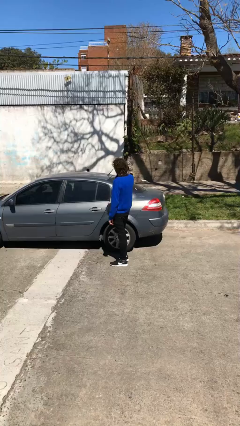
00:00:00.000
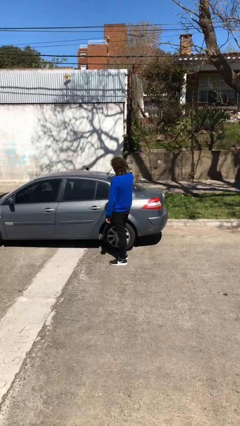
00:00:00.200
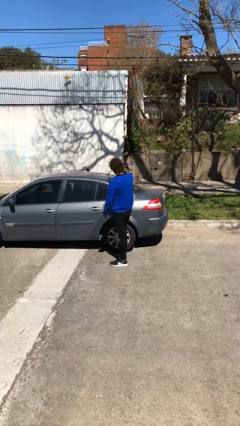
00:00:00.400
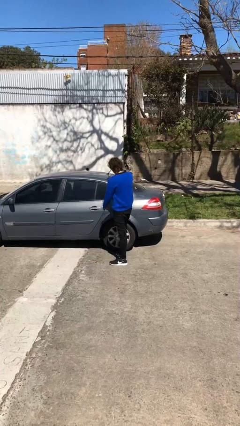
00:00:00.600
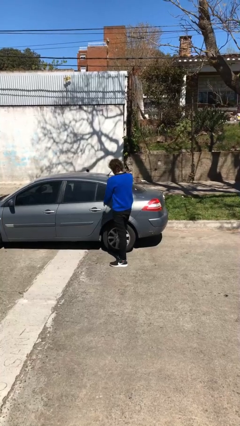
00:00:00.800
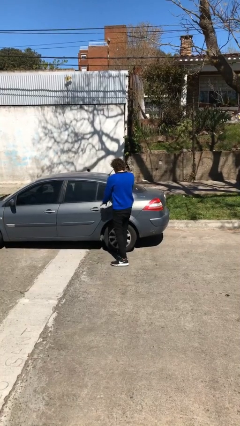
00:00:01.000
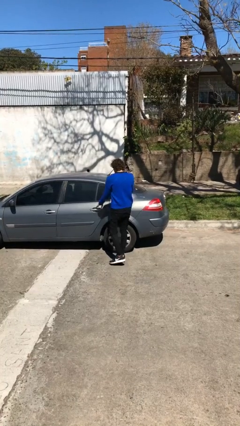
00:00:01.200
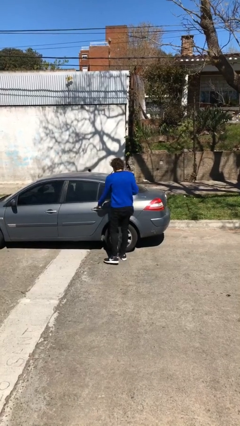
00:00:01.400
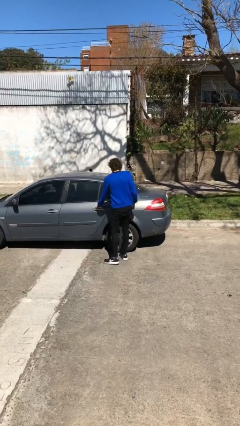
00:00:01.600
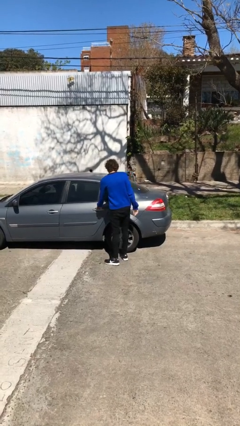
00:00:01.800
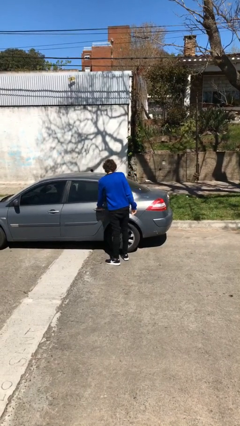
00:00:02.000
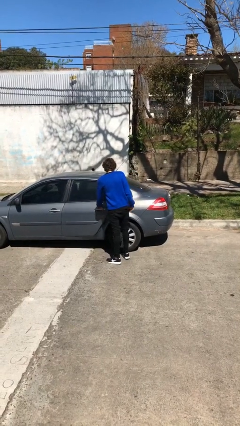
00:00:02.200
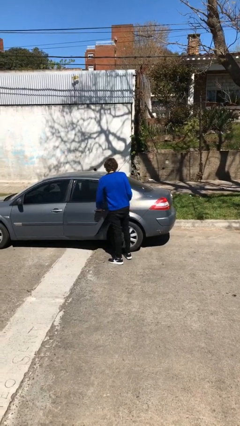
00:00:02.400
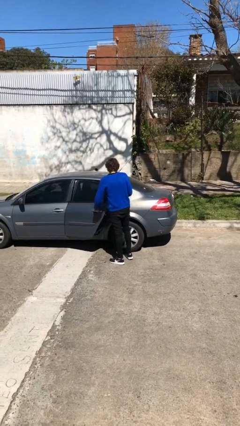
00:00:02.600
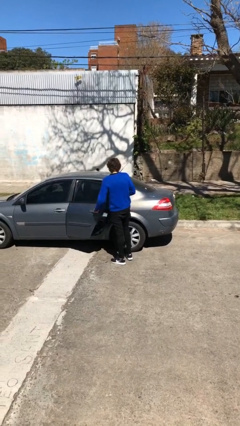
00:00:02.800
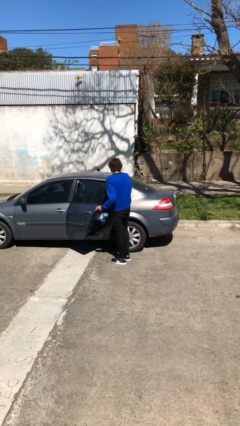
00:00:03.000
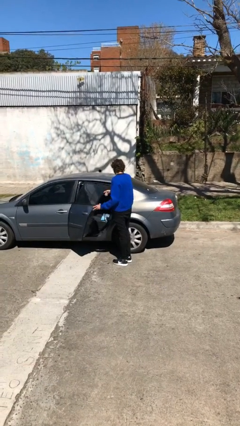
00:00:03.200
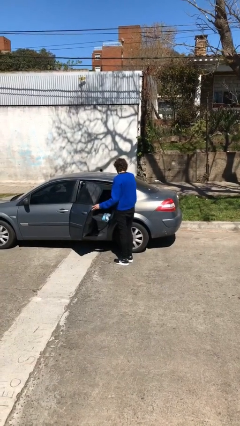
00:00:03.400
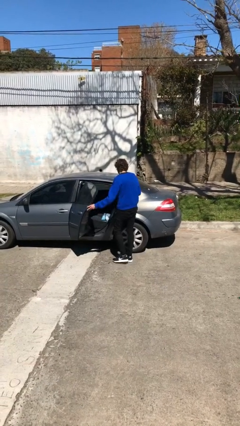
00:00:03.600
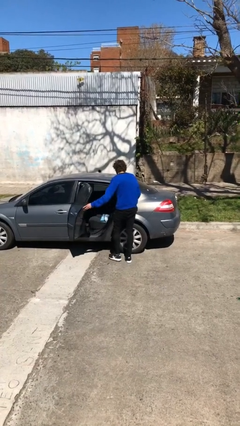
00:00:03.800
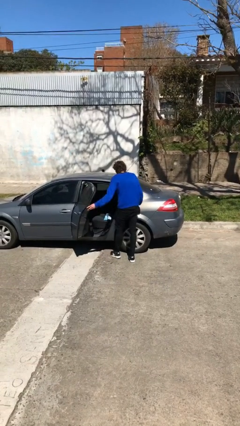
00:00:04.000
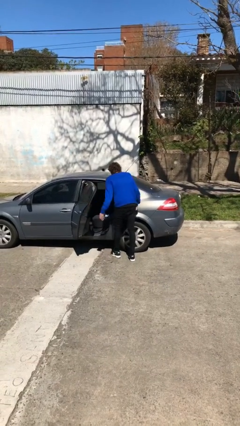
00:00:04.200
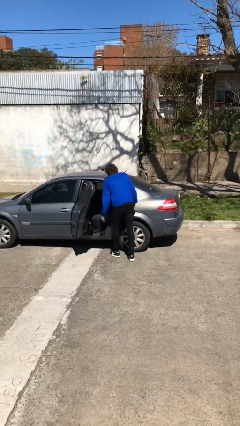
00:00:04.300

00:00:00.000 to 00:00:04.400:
person opens car door

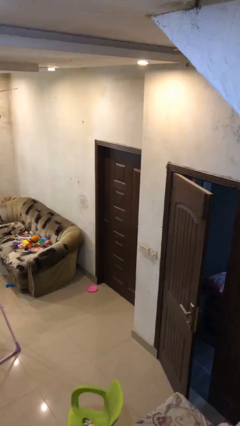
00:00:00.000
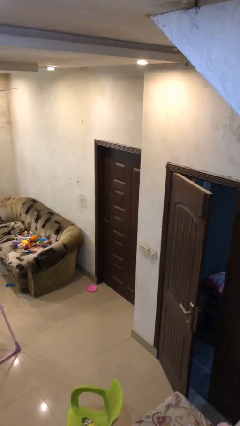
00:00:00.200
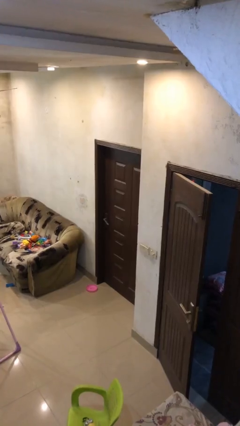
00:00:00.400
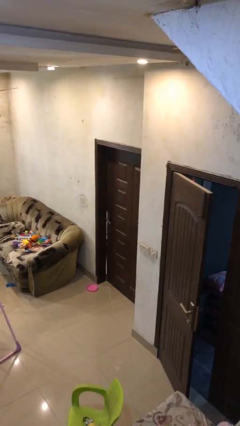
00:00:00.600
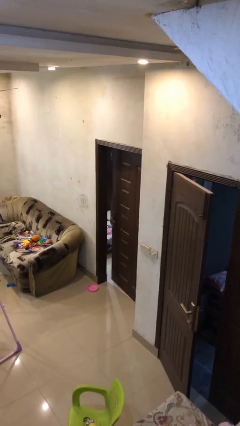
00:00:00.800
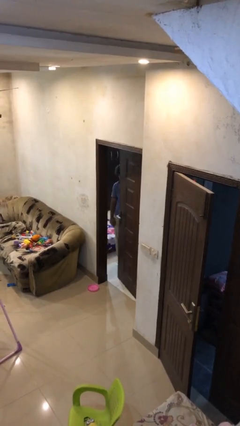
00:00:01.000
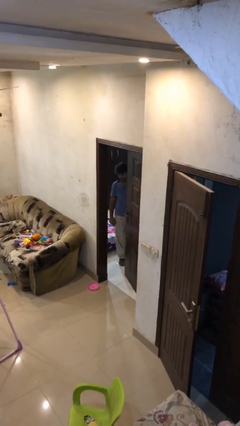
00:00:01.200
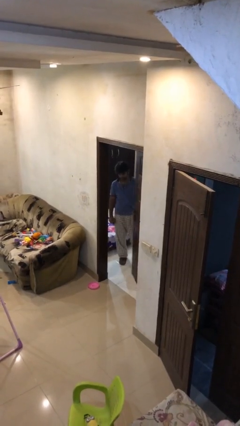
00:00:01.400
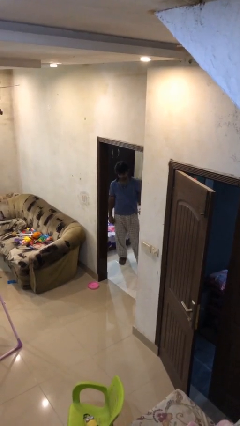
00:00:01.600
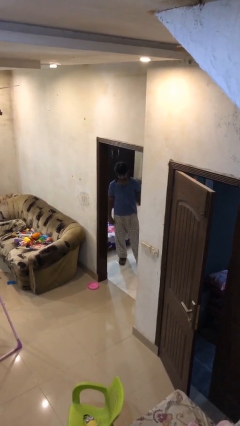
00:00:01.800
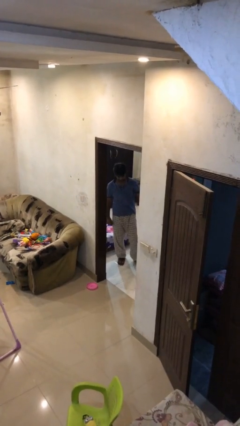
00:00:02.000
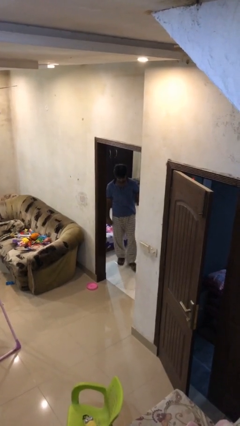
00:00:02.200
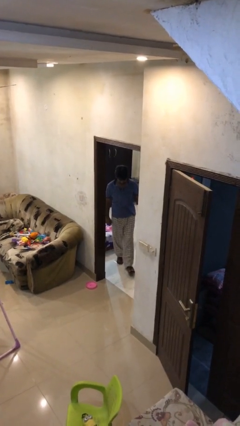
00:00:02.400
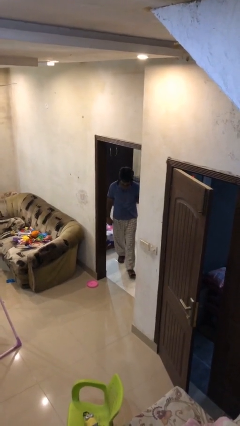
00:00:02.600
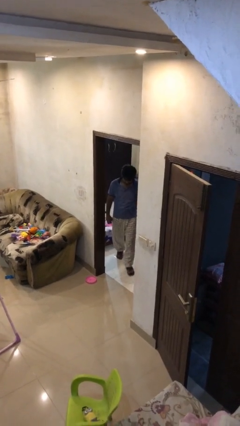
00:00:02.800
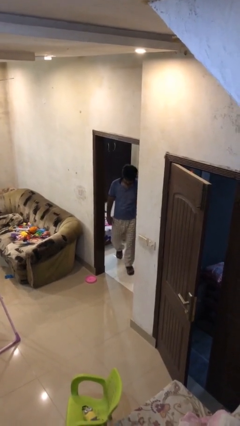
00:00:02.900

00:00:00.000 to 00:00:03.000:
person opens facility door

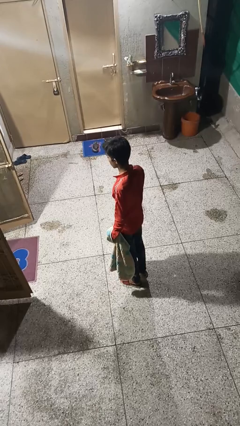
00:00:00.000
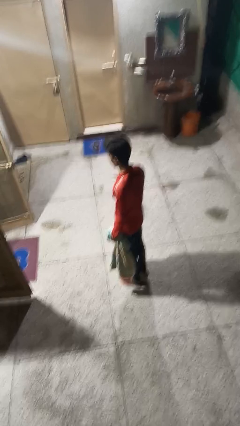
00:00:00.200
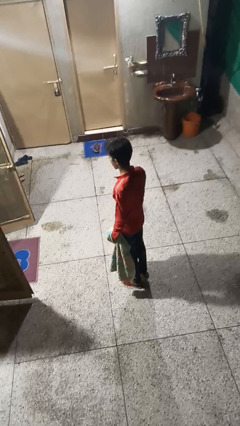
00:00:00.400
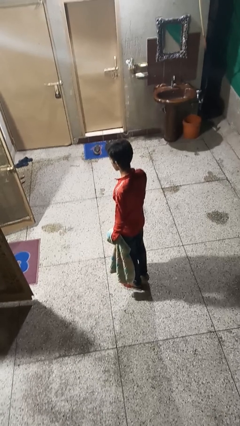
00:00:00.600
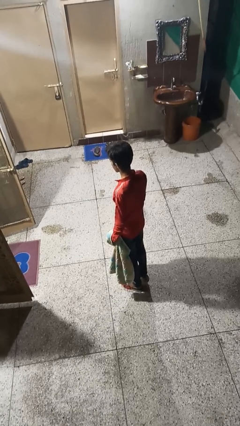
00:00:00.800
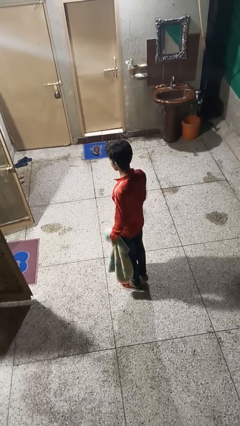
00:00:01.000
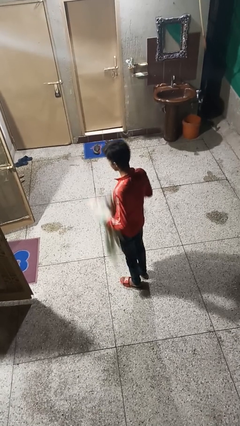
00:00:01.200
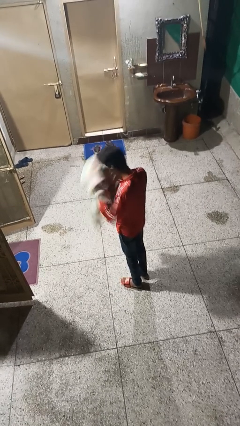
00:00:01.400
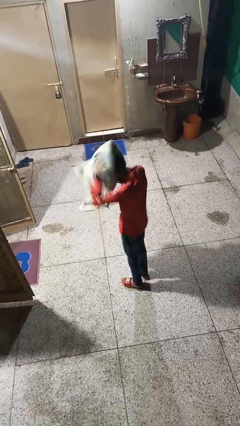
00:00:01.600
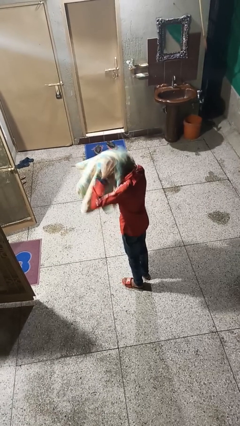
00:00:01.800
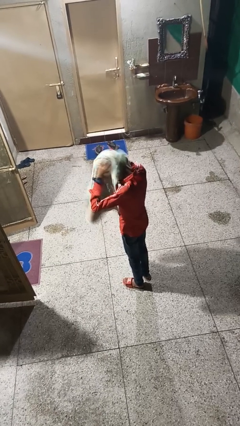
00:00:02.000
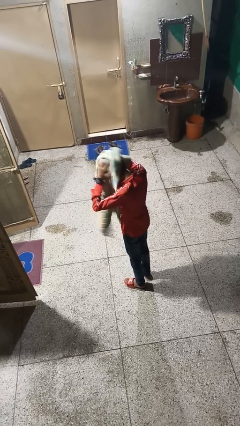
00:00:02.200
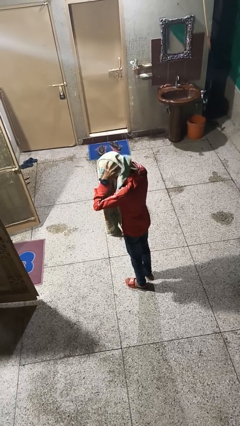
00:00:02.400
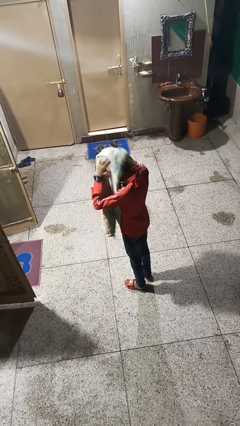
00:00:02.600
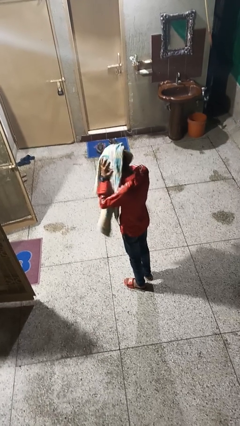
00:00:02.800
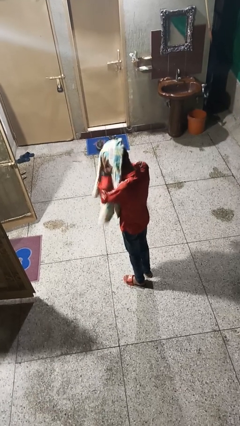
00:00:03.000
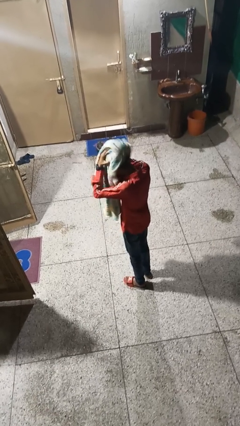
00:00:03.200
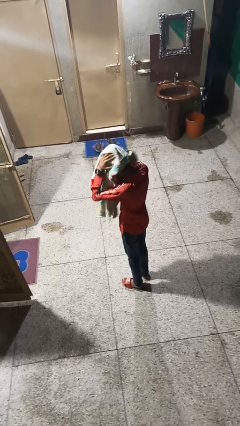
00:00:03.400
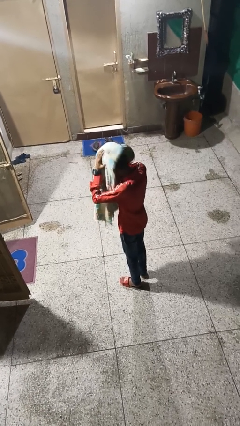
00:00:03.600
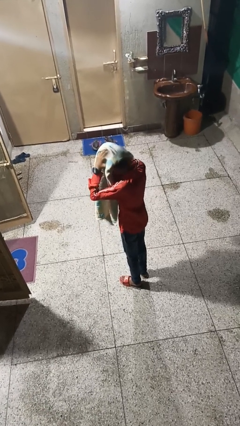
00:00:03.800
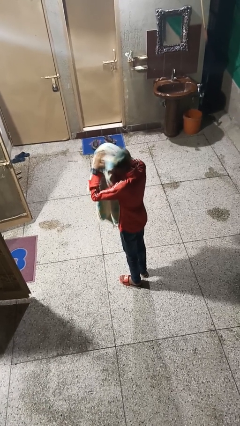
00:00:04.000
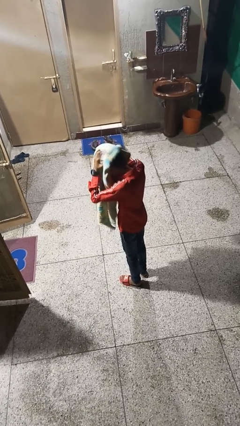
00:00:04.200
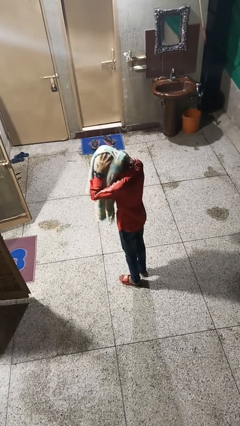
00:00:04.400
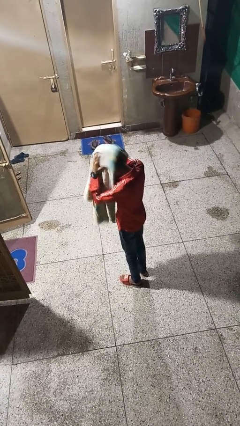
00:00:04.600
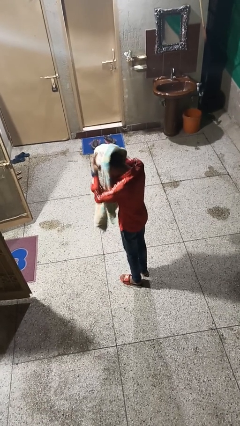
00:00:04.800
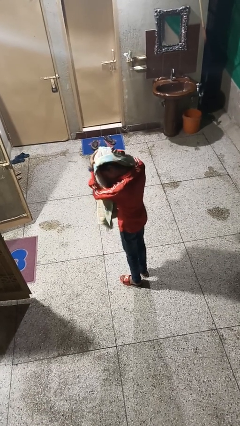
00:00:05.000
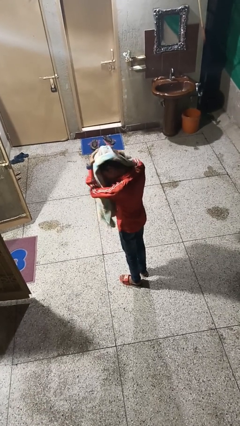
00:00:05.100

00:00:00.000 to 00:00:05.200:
person dries hair with towel

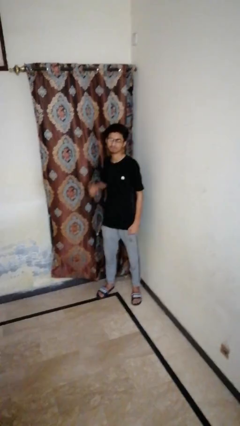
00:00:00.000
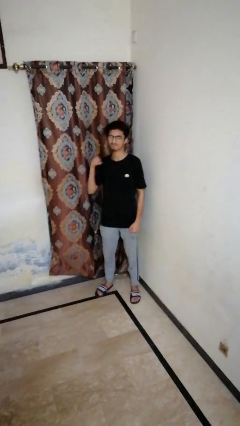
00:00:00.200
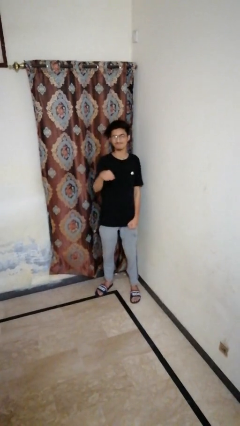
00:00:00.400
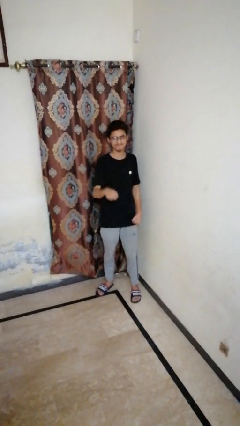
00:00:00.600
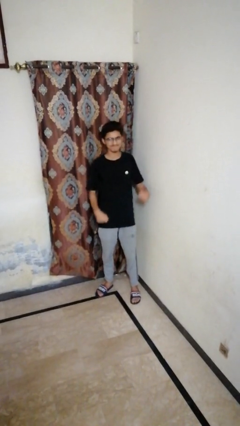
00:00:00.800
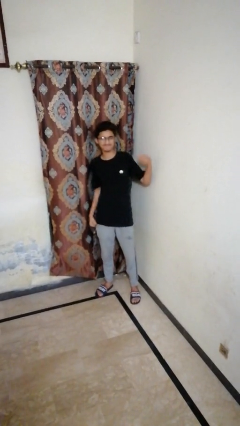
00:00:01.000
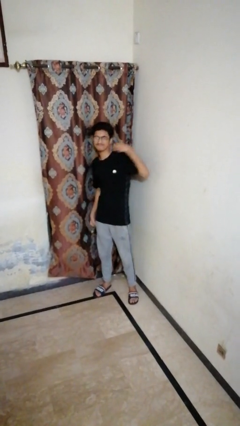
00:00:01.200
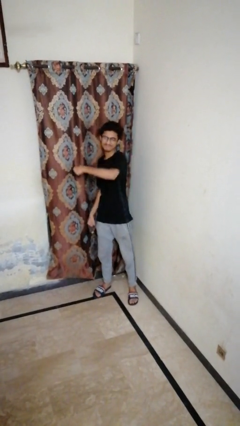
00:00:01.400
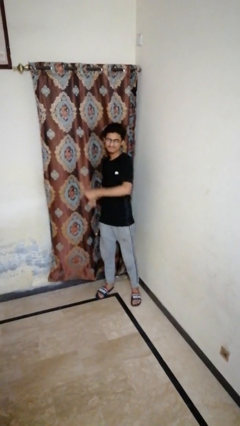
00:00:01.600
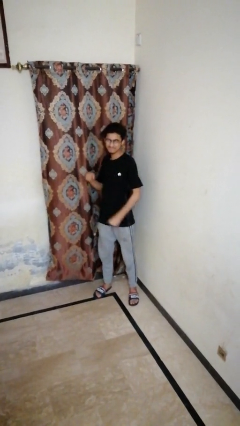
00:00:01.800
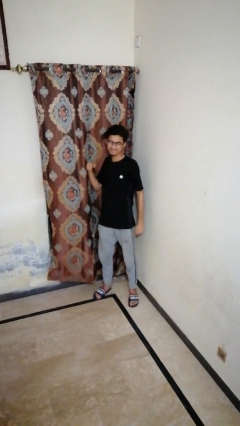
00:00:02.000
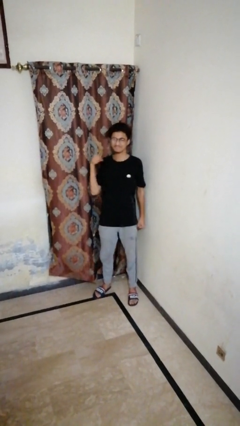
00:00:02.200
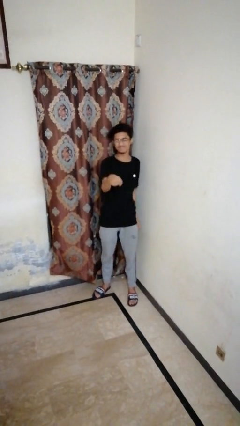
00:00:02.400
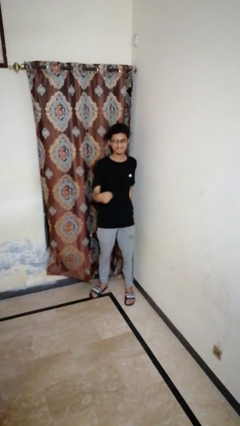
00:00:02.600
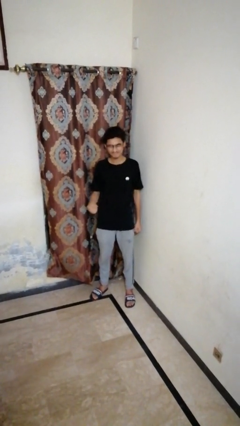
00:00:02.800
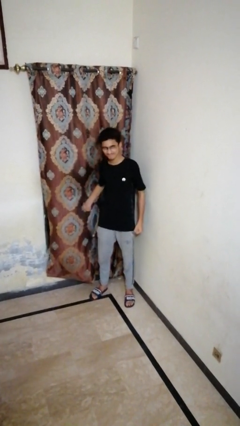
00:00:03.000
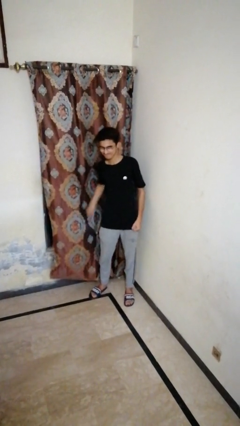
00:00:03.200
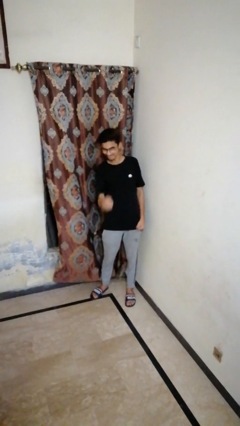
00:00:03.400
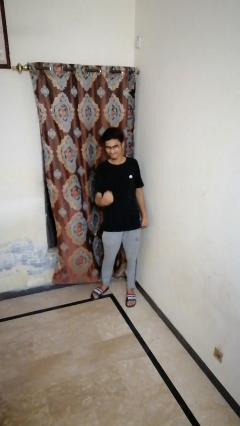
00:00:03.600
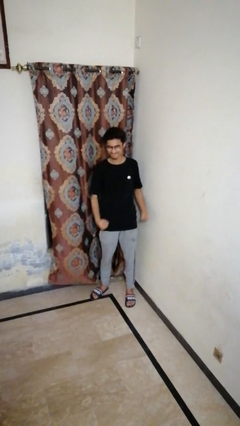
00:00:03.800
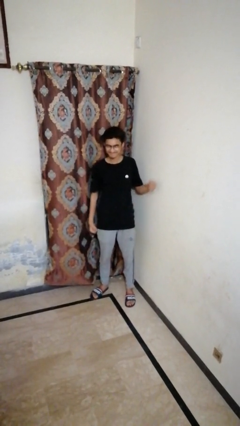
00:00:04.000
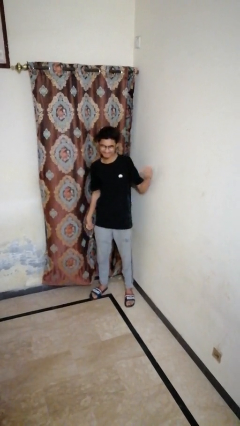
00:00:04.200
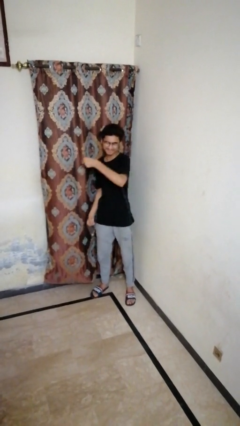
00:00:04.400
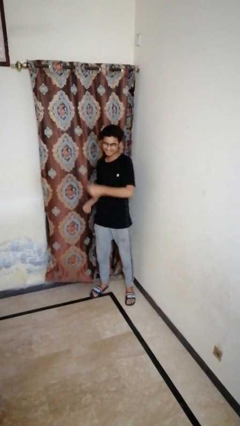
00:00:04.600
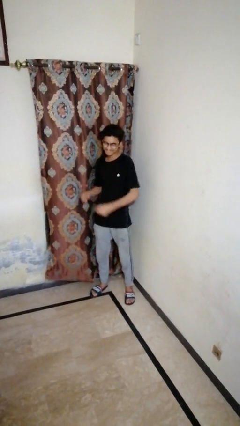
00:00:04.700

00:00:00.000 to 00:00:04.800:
person punches
